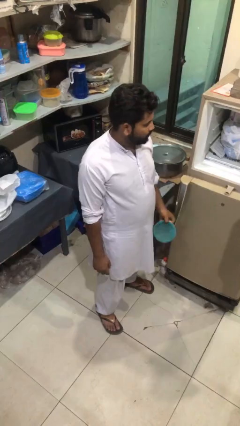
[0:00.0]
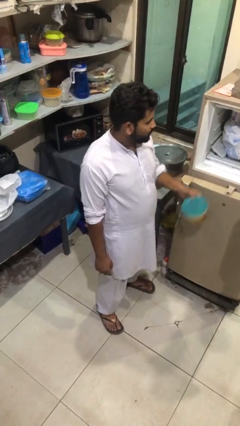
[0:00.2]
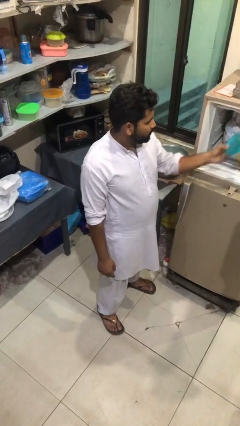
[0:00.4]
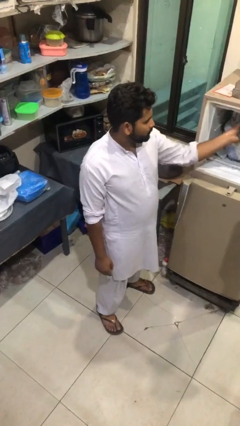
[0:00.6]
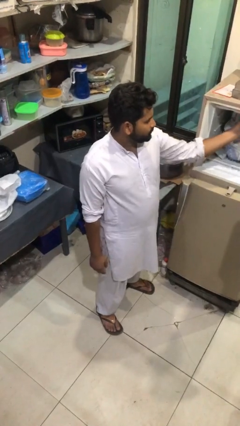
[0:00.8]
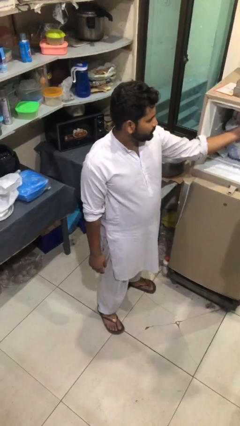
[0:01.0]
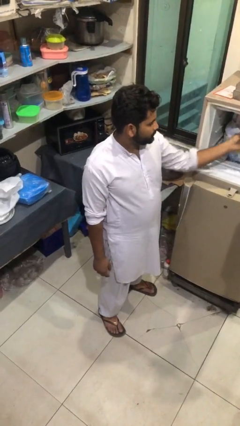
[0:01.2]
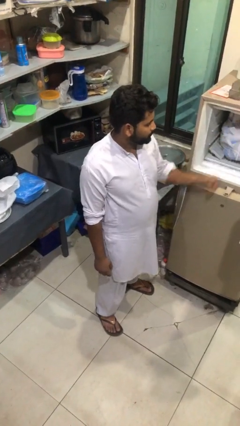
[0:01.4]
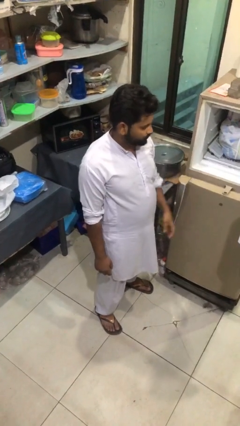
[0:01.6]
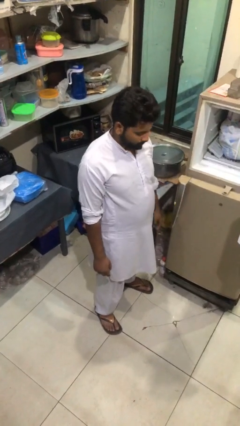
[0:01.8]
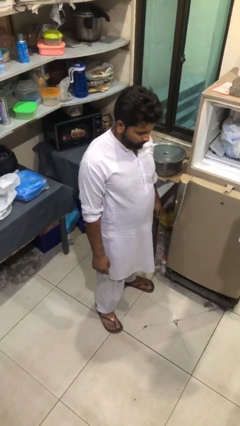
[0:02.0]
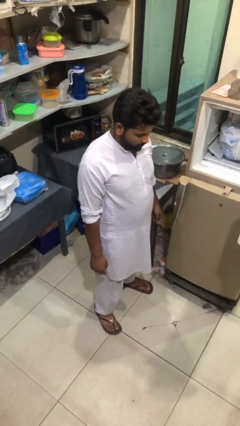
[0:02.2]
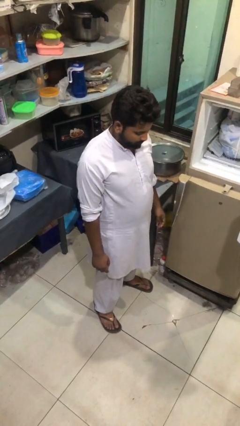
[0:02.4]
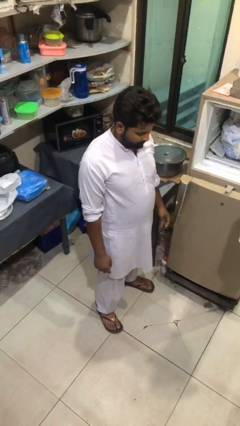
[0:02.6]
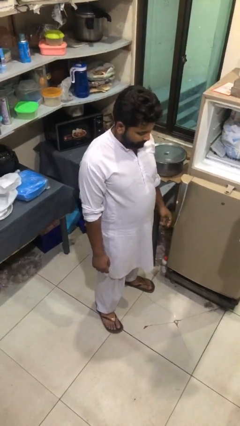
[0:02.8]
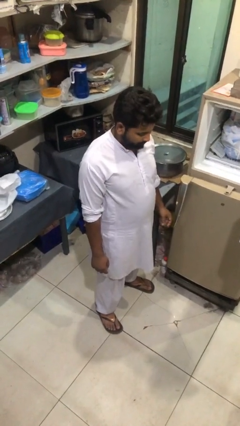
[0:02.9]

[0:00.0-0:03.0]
person puts object into refrigerator

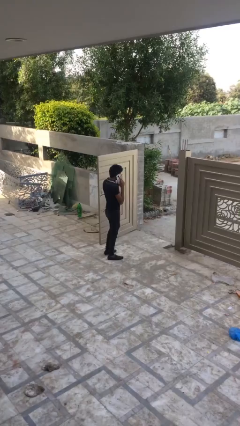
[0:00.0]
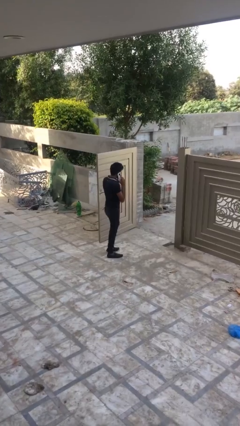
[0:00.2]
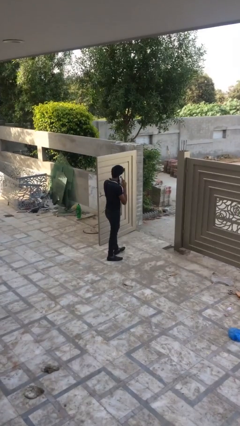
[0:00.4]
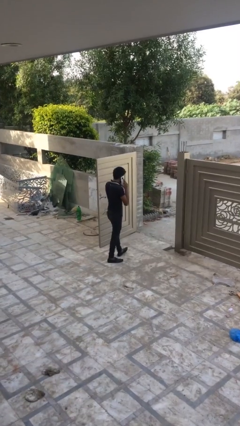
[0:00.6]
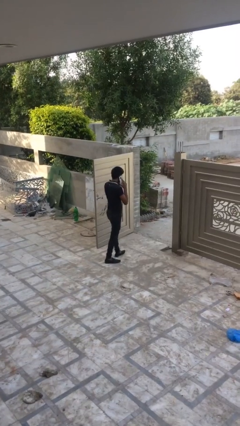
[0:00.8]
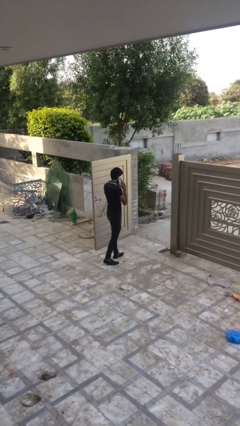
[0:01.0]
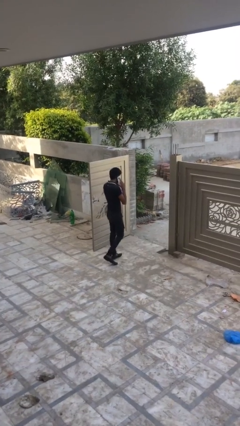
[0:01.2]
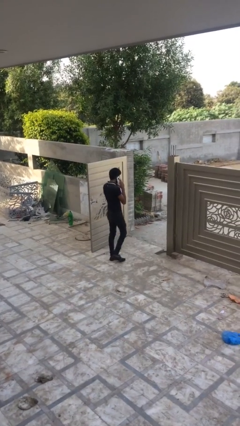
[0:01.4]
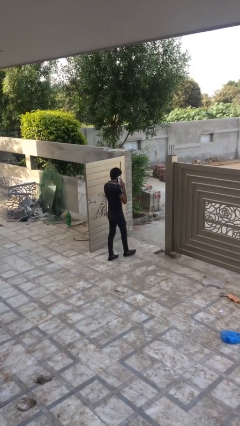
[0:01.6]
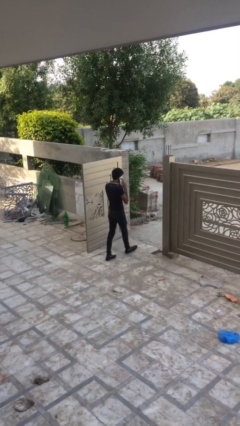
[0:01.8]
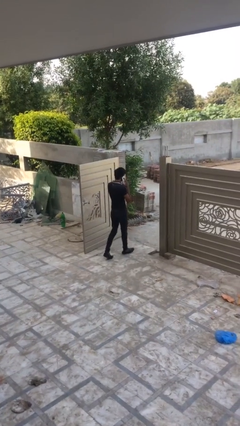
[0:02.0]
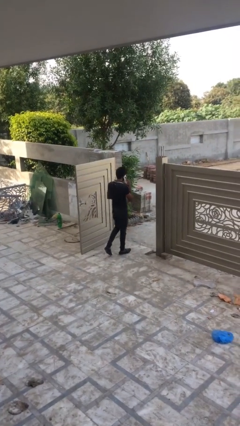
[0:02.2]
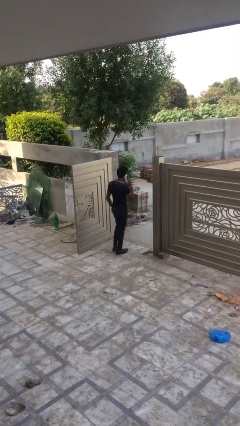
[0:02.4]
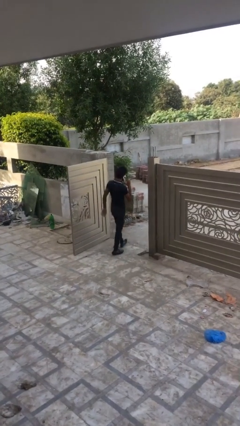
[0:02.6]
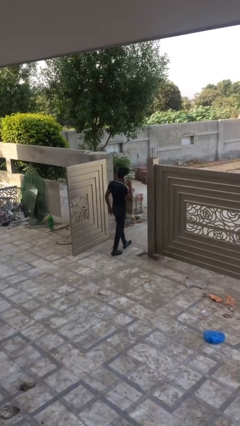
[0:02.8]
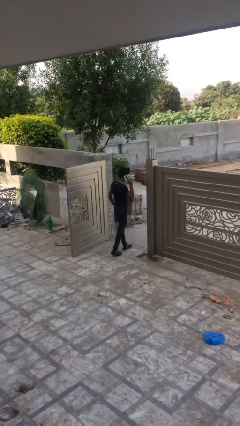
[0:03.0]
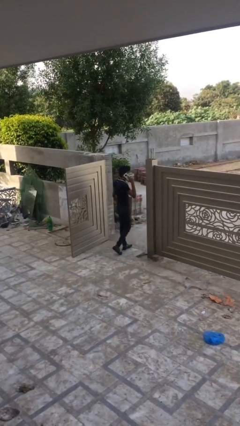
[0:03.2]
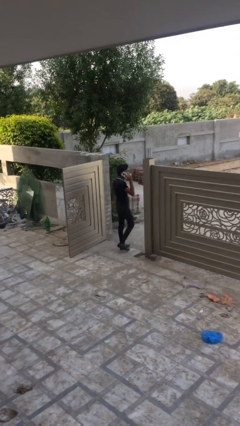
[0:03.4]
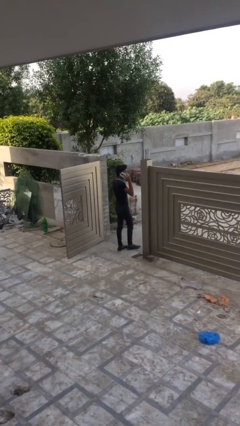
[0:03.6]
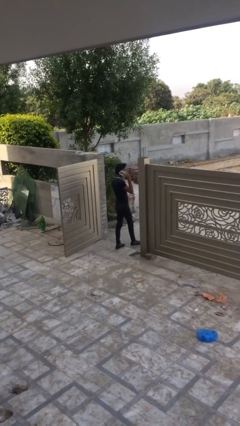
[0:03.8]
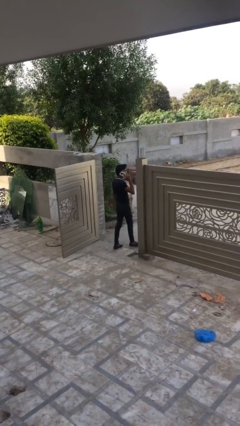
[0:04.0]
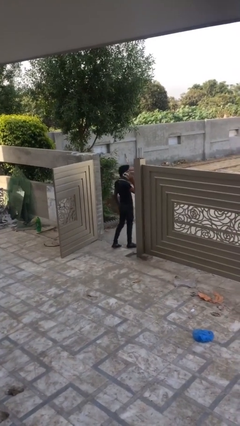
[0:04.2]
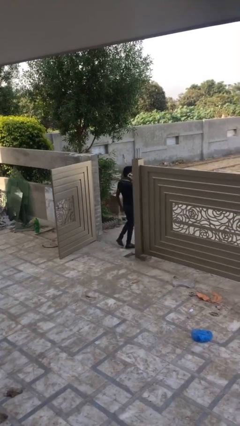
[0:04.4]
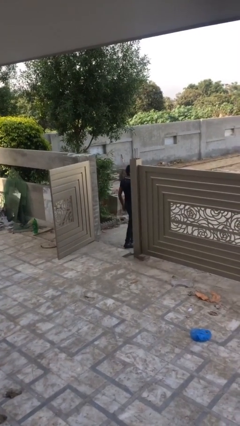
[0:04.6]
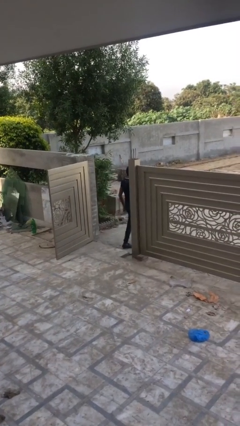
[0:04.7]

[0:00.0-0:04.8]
person exits scene through structure

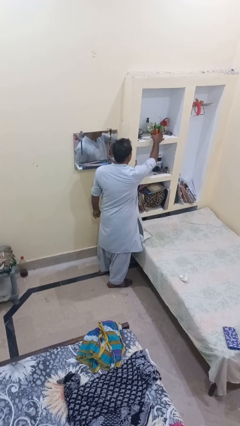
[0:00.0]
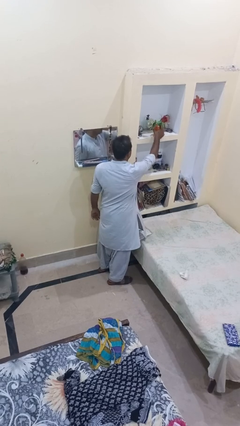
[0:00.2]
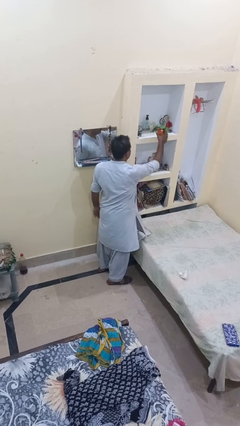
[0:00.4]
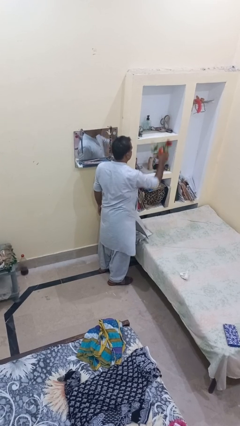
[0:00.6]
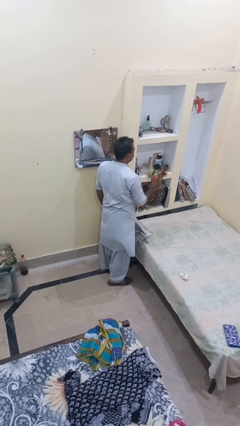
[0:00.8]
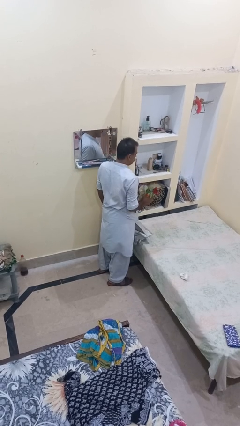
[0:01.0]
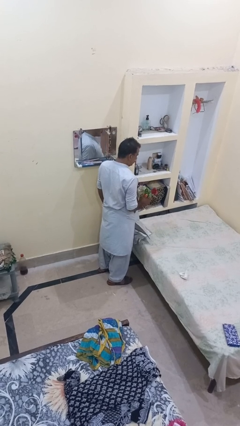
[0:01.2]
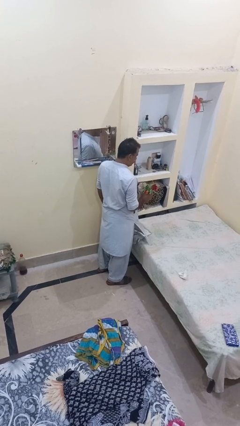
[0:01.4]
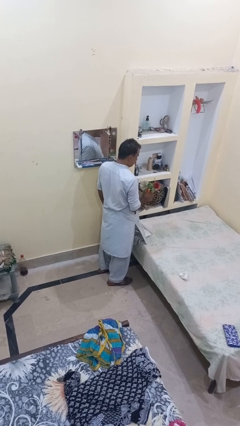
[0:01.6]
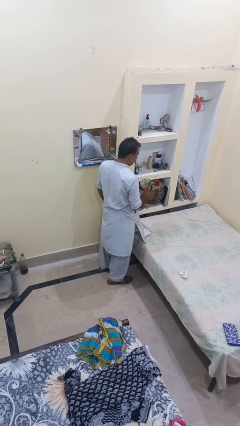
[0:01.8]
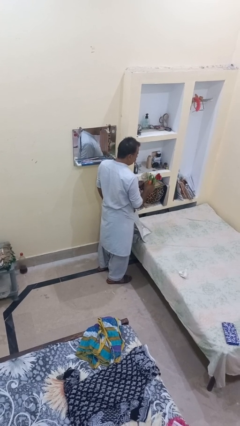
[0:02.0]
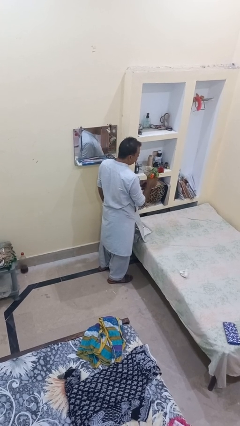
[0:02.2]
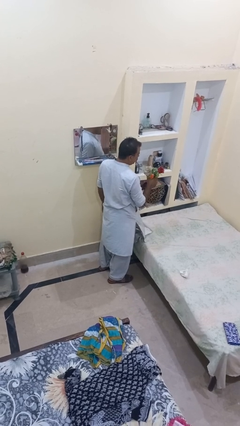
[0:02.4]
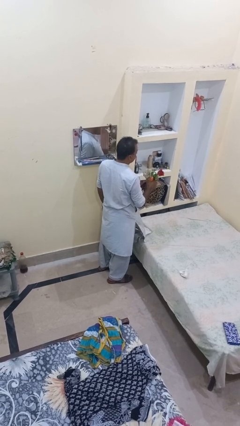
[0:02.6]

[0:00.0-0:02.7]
person picks up object from shelf

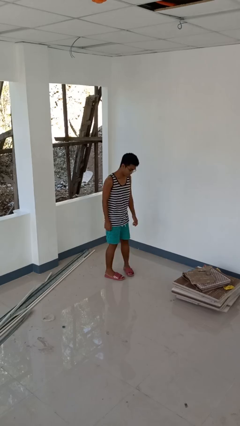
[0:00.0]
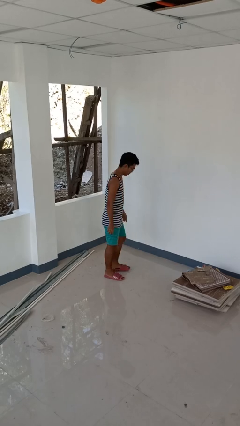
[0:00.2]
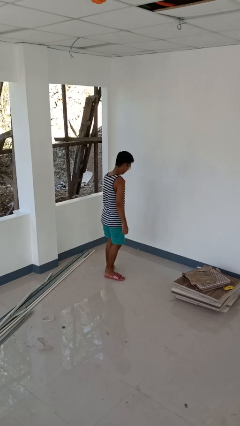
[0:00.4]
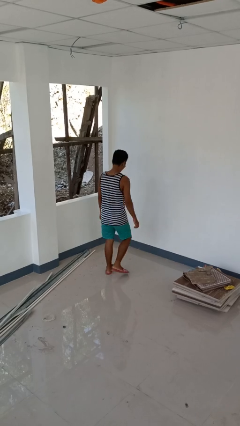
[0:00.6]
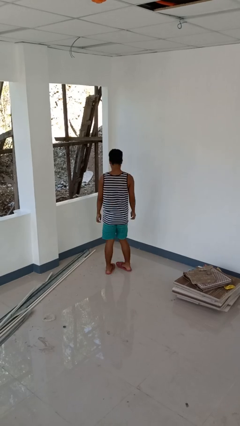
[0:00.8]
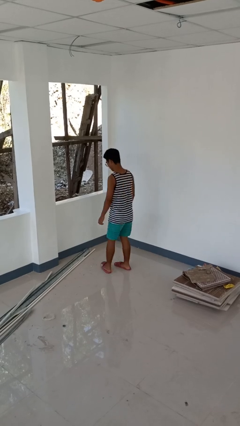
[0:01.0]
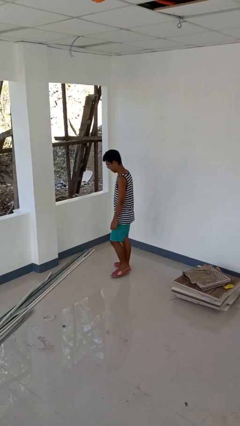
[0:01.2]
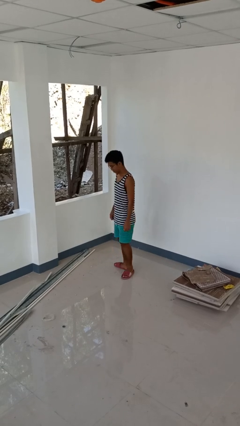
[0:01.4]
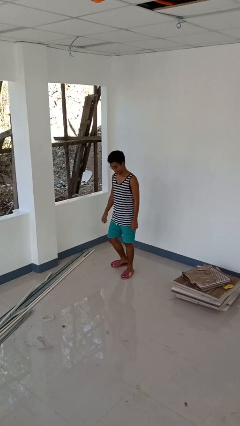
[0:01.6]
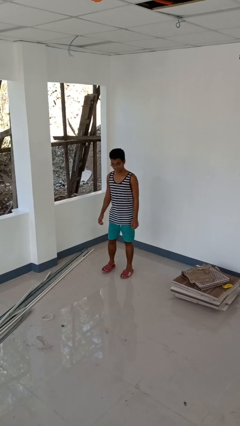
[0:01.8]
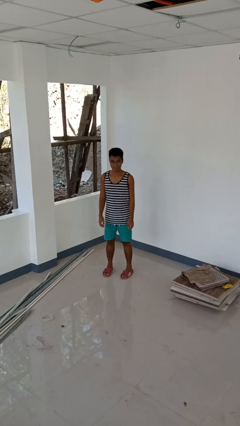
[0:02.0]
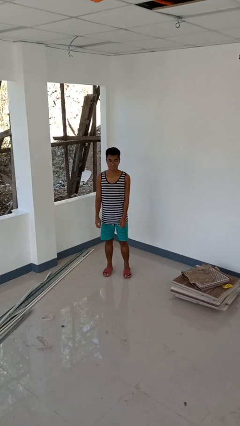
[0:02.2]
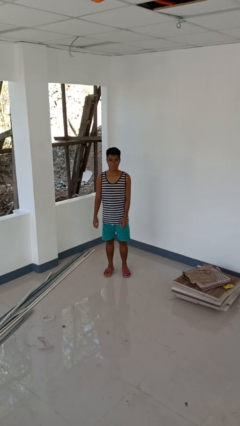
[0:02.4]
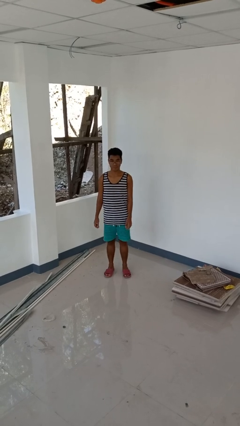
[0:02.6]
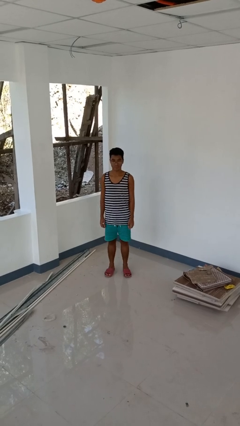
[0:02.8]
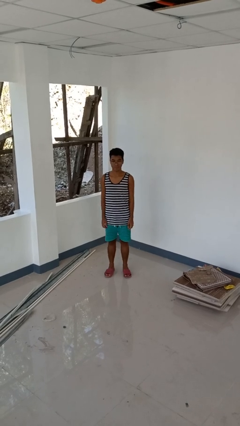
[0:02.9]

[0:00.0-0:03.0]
person twirls

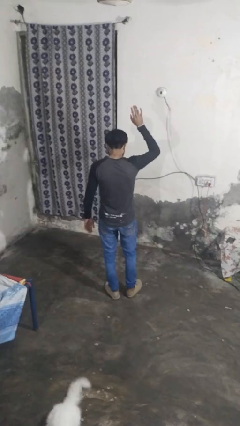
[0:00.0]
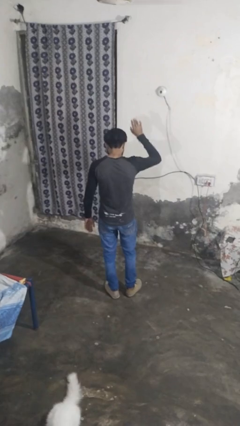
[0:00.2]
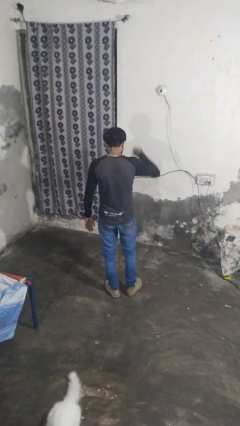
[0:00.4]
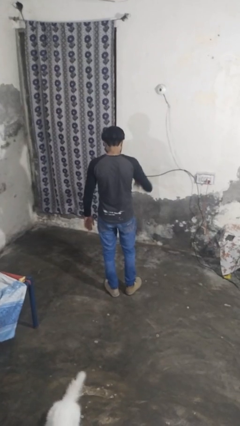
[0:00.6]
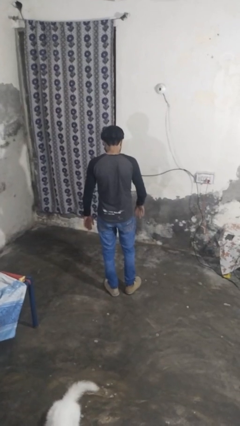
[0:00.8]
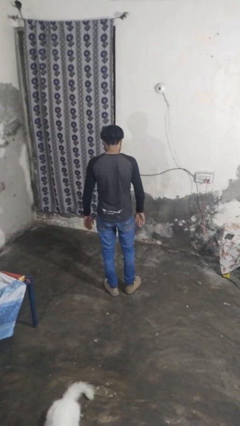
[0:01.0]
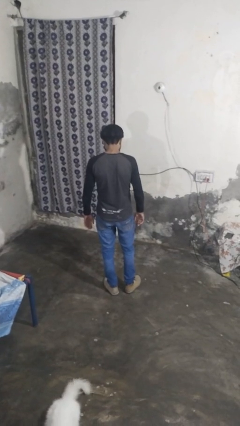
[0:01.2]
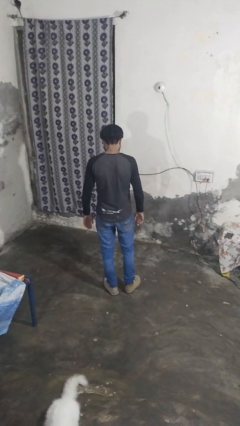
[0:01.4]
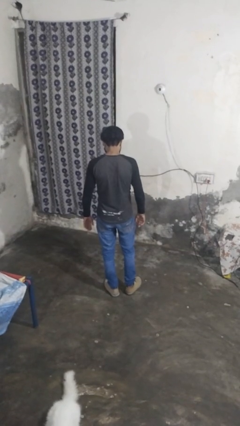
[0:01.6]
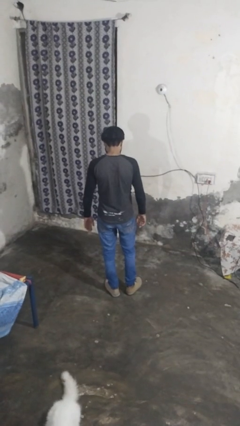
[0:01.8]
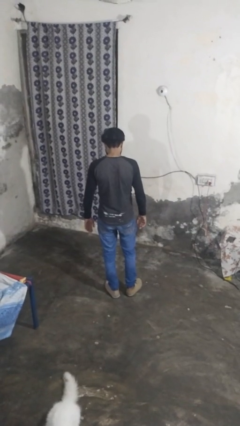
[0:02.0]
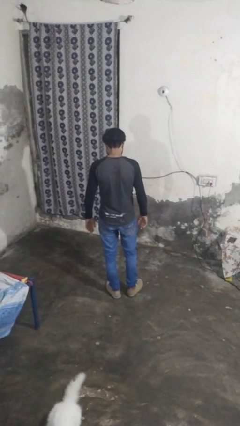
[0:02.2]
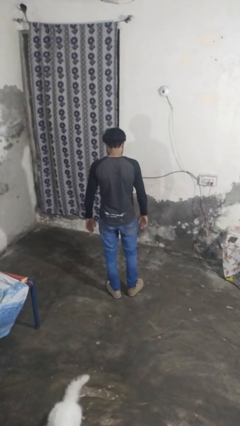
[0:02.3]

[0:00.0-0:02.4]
person gestures lower hand

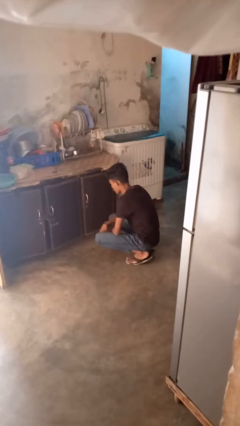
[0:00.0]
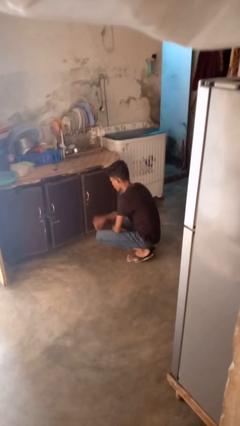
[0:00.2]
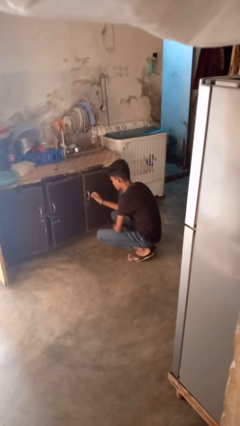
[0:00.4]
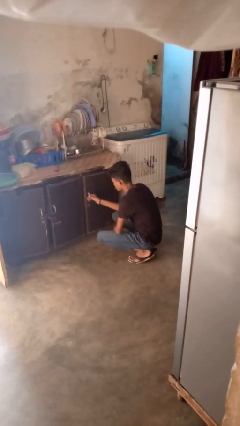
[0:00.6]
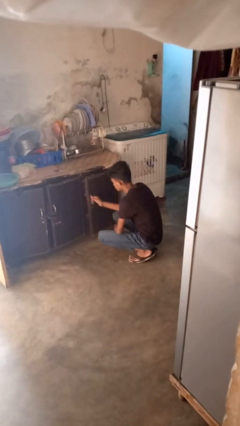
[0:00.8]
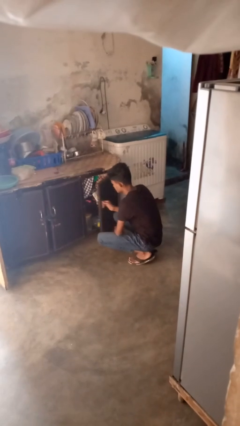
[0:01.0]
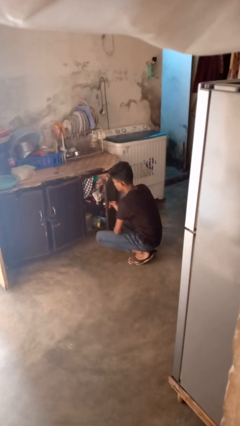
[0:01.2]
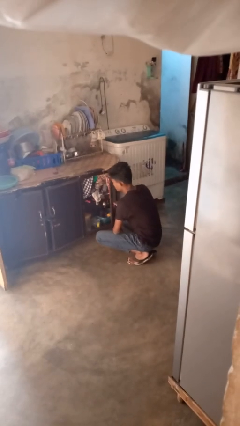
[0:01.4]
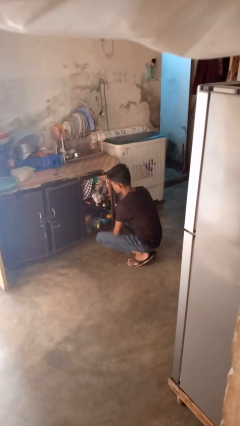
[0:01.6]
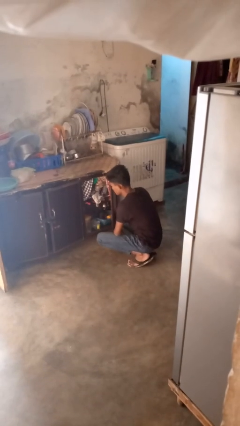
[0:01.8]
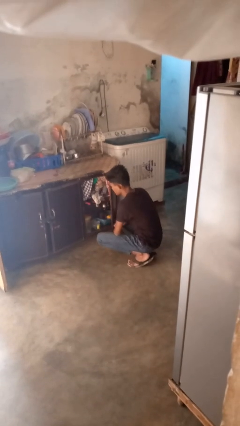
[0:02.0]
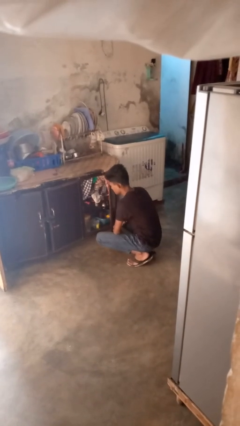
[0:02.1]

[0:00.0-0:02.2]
person opens cabinet
